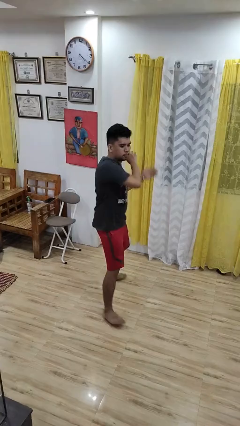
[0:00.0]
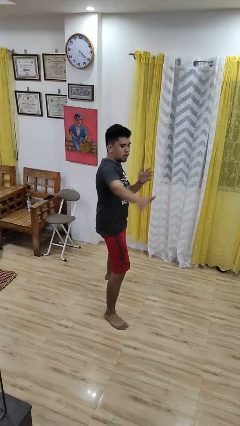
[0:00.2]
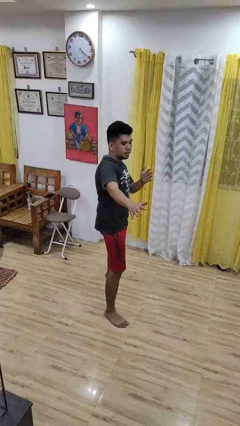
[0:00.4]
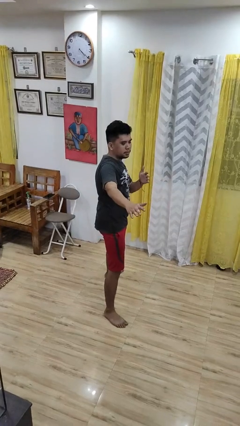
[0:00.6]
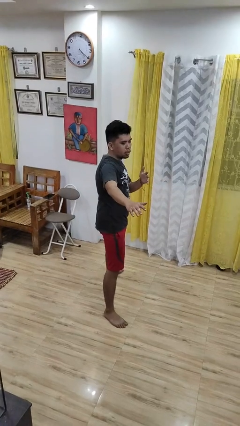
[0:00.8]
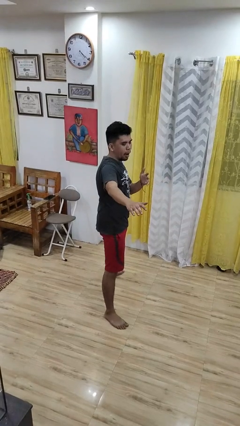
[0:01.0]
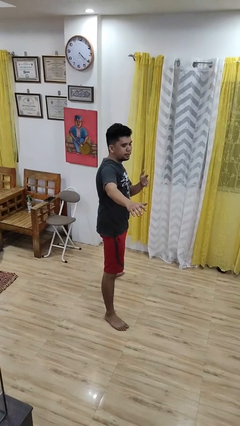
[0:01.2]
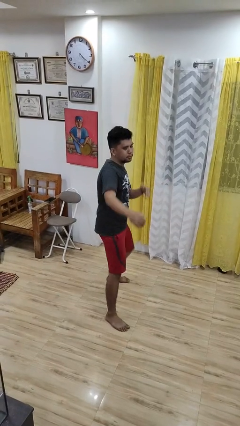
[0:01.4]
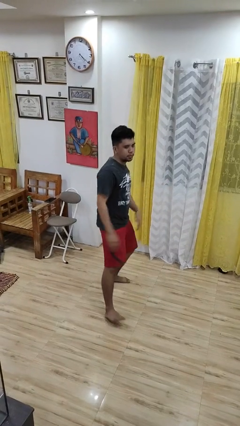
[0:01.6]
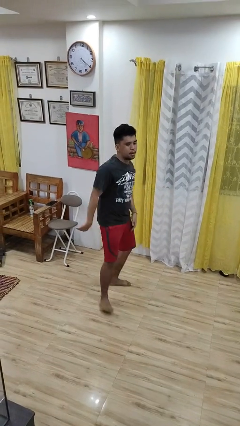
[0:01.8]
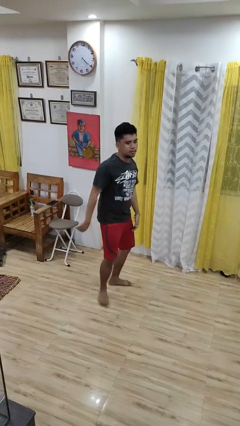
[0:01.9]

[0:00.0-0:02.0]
person karate chop

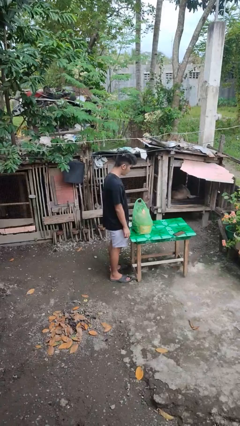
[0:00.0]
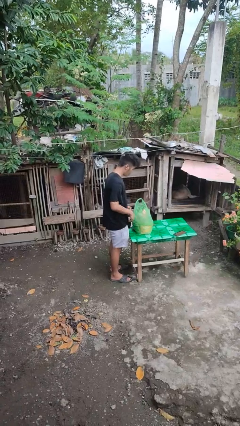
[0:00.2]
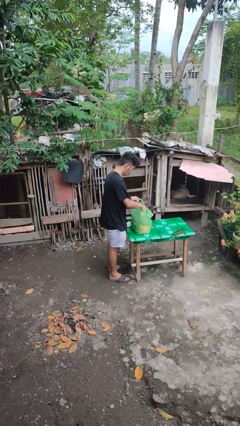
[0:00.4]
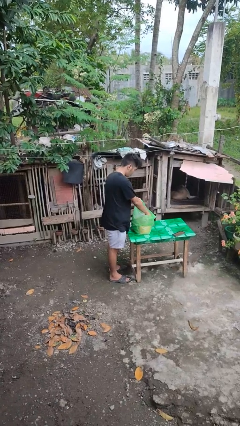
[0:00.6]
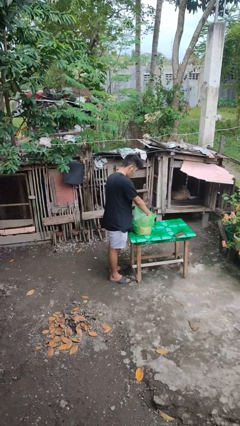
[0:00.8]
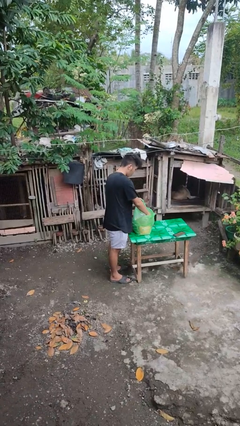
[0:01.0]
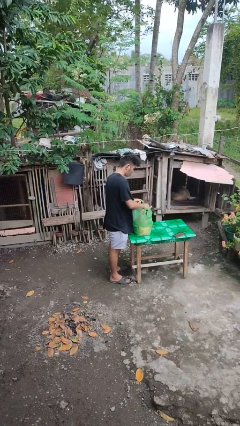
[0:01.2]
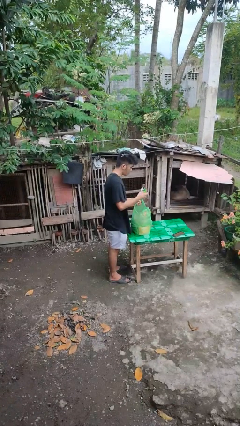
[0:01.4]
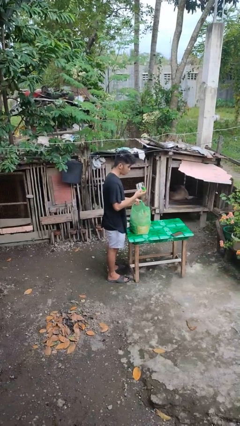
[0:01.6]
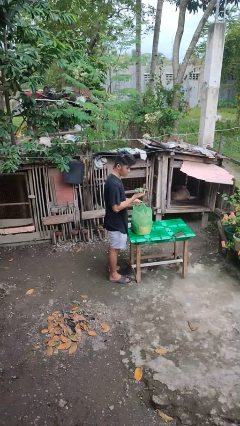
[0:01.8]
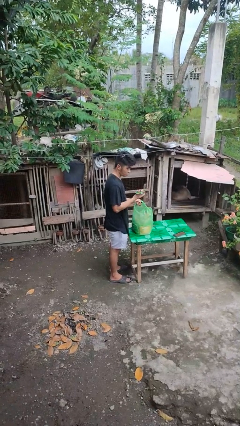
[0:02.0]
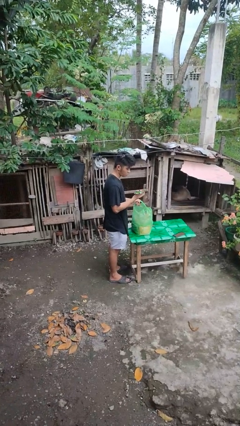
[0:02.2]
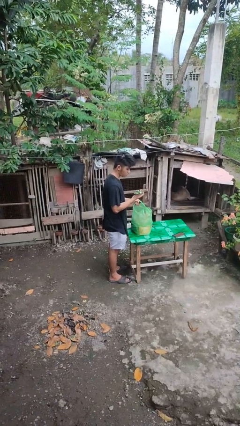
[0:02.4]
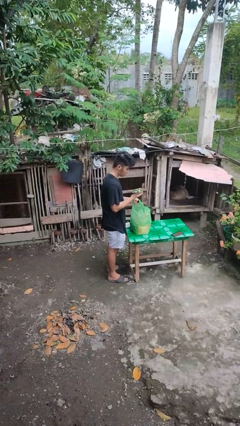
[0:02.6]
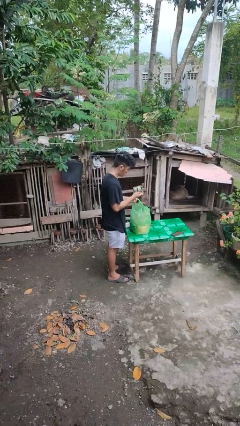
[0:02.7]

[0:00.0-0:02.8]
person takes object from bag

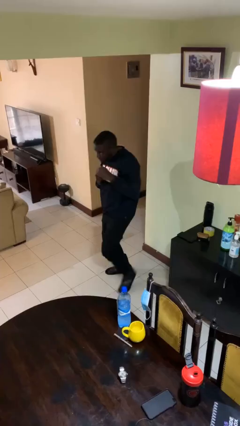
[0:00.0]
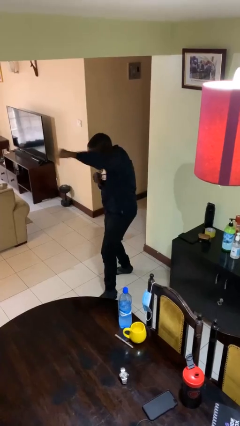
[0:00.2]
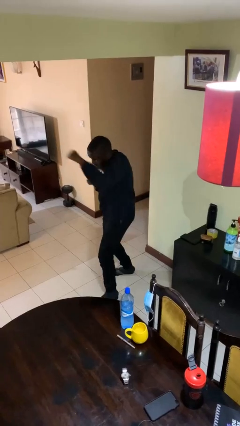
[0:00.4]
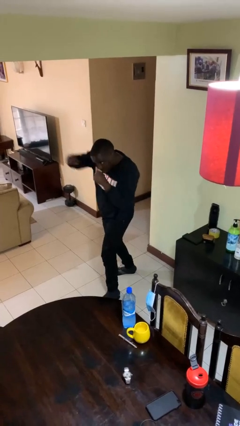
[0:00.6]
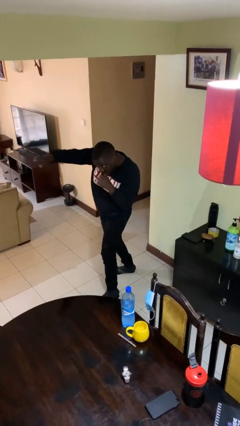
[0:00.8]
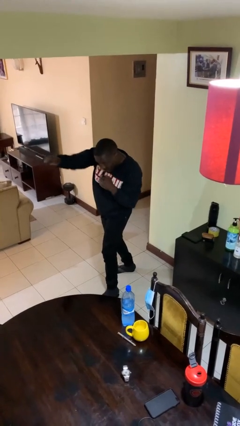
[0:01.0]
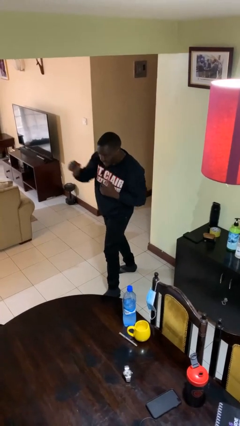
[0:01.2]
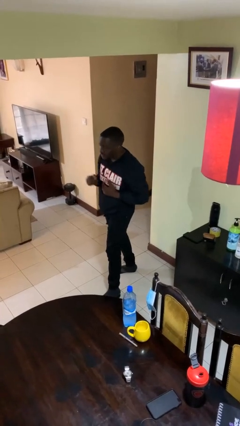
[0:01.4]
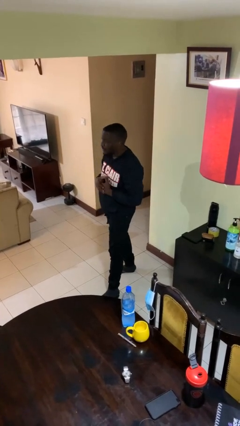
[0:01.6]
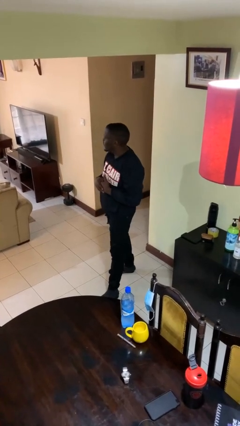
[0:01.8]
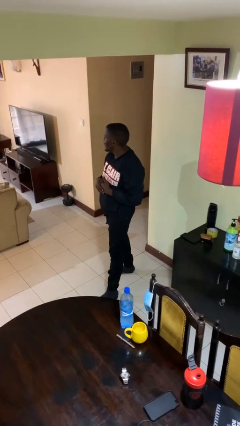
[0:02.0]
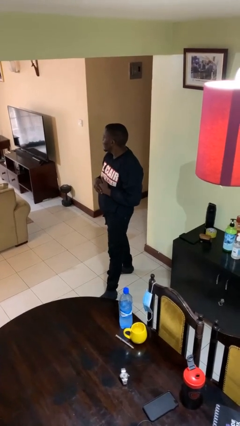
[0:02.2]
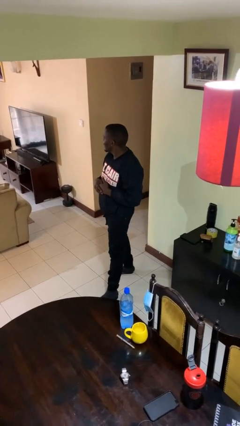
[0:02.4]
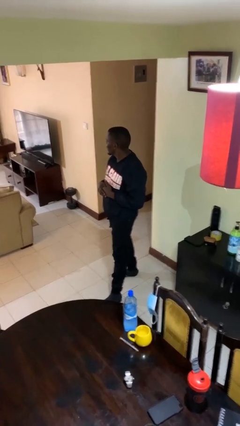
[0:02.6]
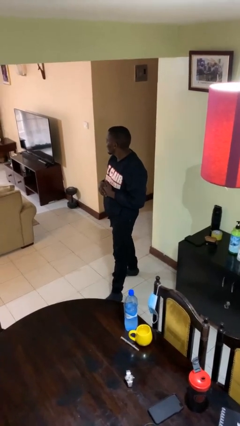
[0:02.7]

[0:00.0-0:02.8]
person punches

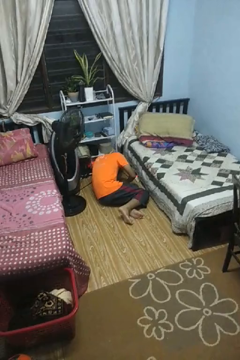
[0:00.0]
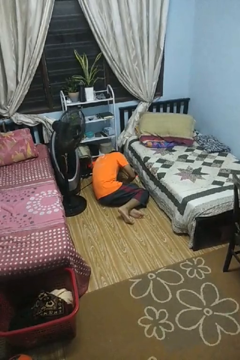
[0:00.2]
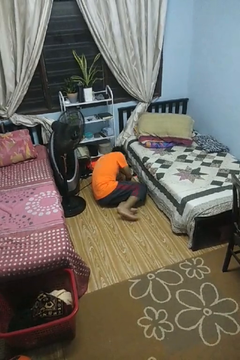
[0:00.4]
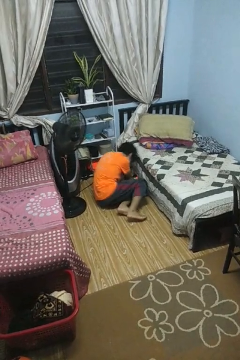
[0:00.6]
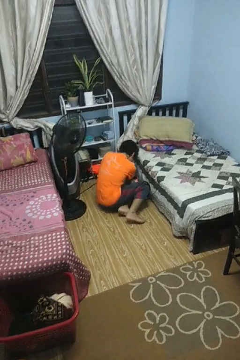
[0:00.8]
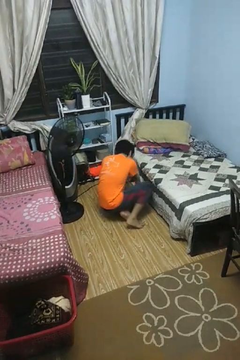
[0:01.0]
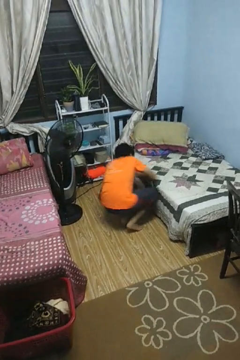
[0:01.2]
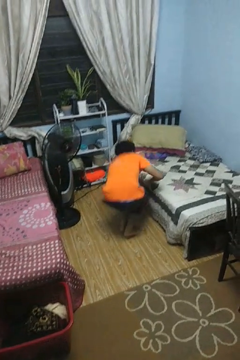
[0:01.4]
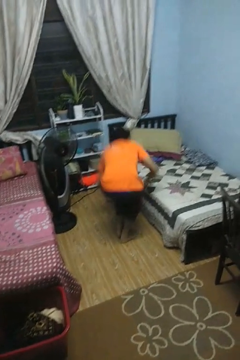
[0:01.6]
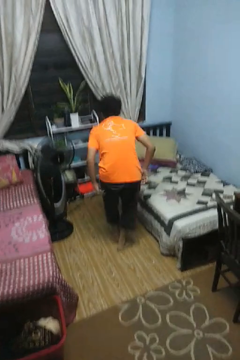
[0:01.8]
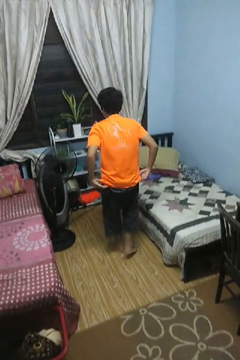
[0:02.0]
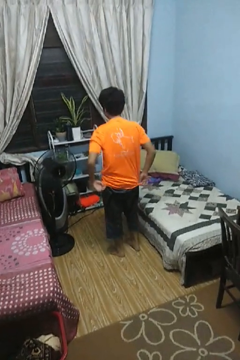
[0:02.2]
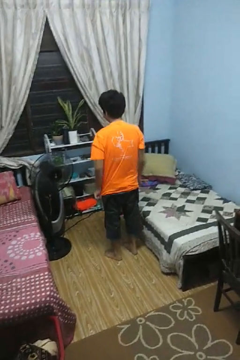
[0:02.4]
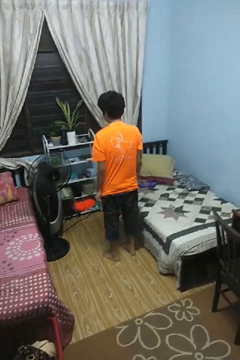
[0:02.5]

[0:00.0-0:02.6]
person stands up from floor

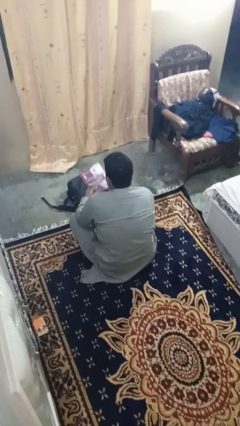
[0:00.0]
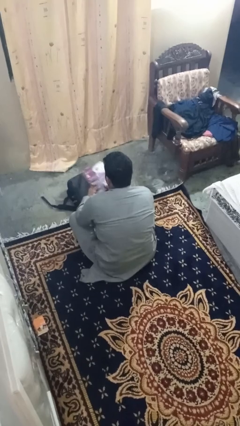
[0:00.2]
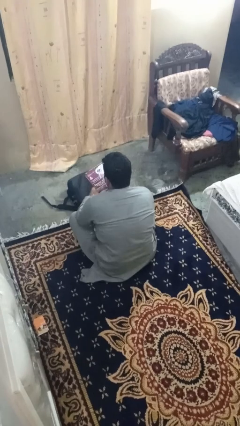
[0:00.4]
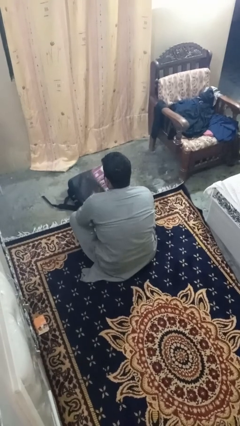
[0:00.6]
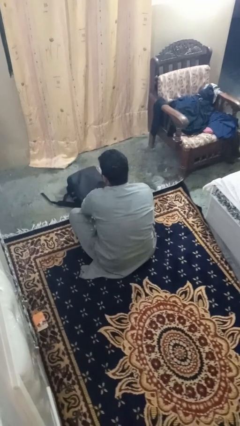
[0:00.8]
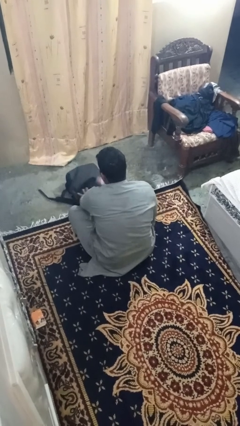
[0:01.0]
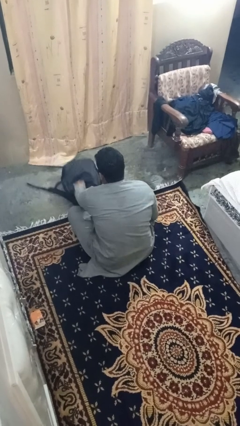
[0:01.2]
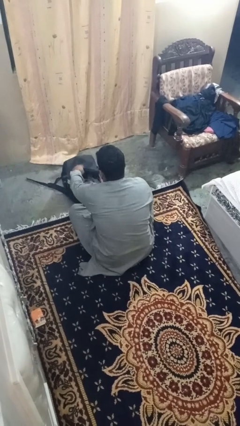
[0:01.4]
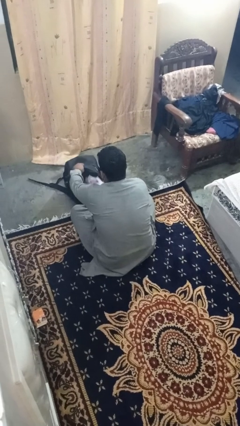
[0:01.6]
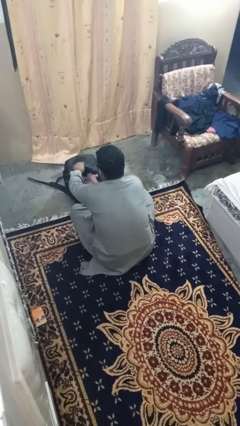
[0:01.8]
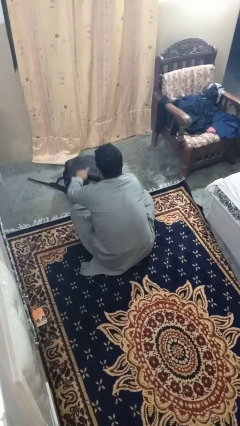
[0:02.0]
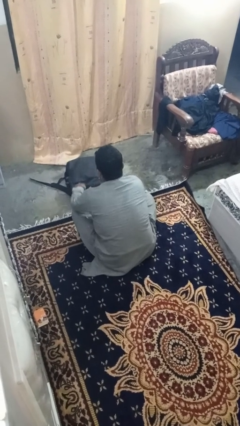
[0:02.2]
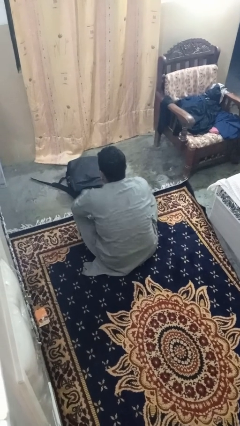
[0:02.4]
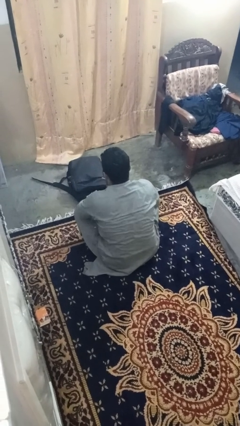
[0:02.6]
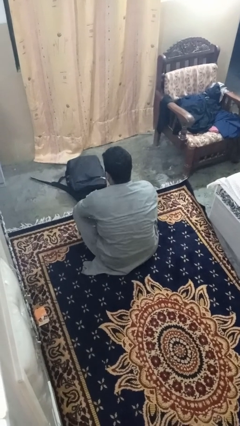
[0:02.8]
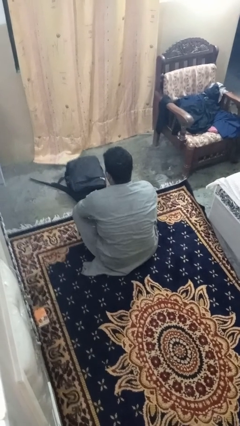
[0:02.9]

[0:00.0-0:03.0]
person puts object into bag

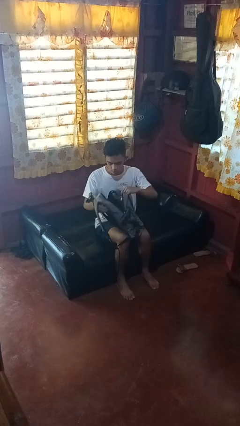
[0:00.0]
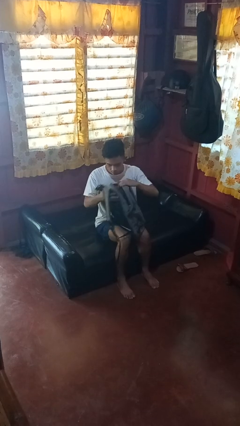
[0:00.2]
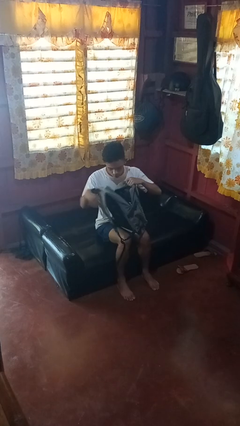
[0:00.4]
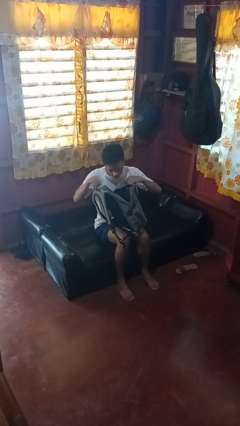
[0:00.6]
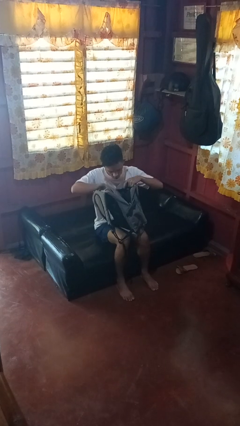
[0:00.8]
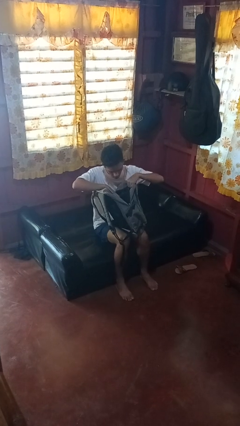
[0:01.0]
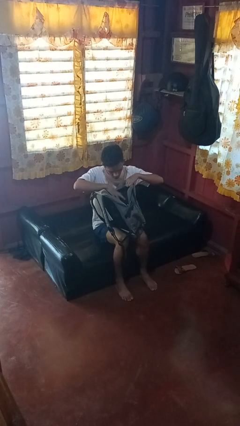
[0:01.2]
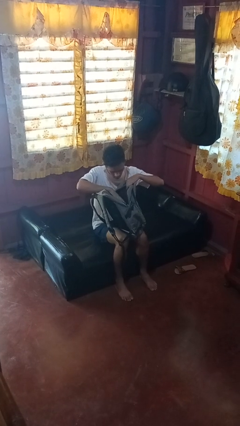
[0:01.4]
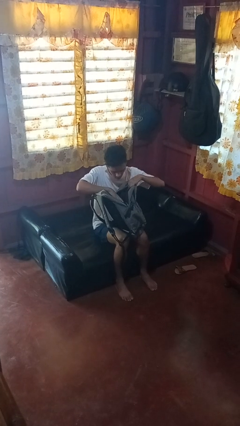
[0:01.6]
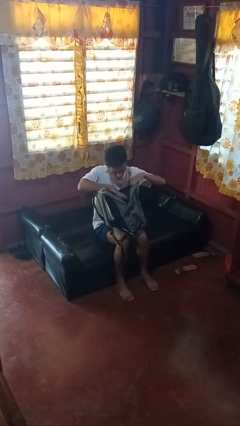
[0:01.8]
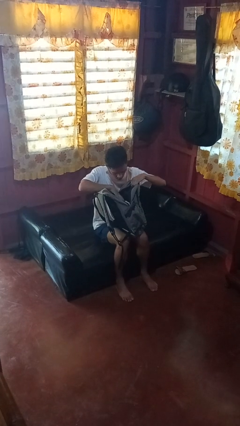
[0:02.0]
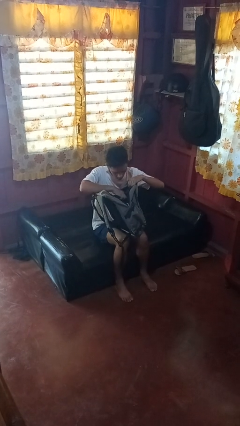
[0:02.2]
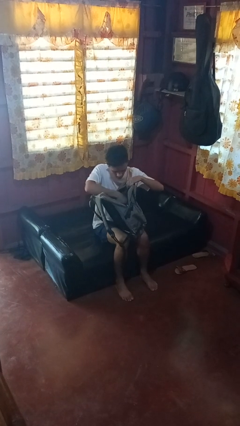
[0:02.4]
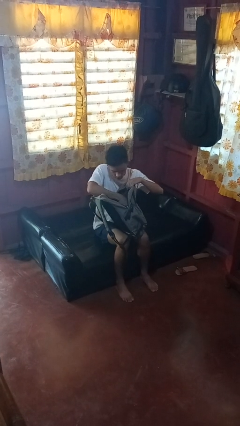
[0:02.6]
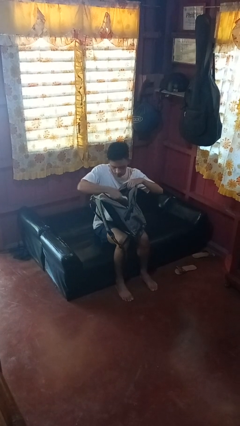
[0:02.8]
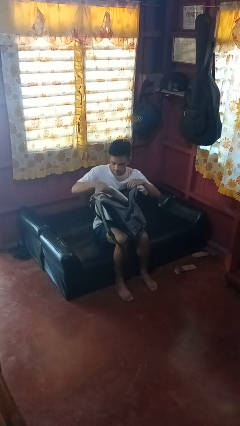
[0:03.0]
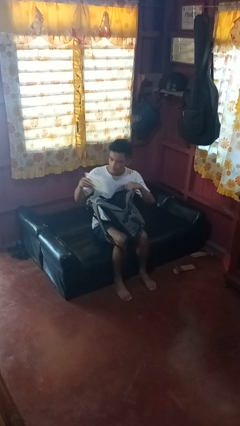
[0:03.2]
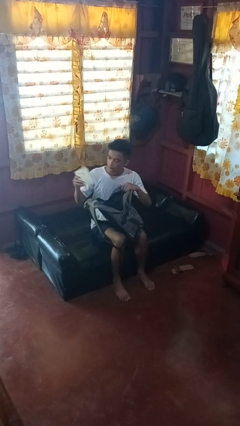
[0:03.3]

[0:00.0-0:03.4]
person searches in backpack

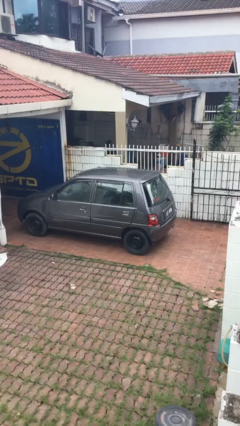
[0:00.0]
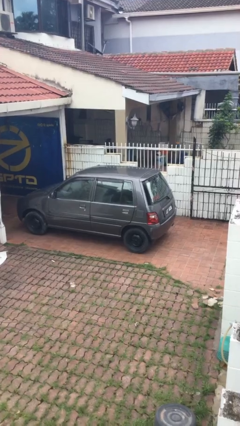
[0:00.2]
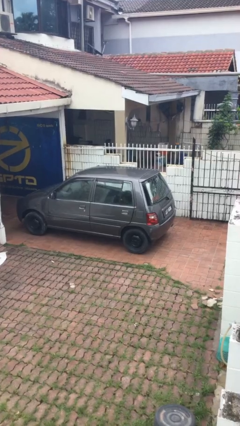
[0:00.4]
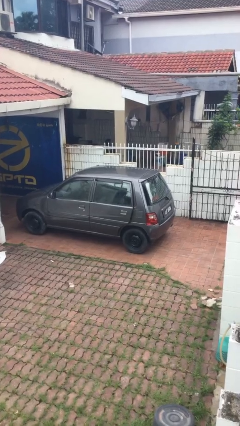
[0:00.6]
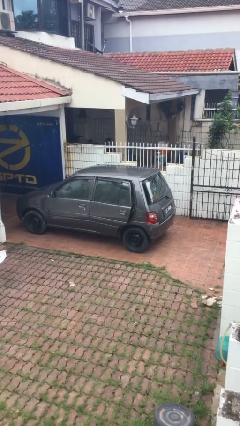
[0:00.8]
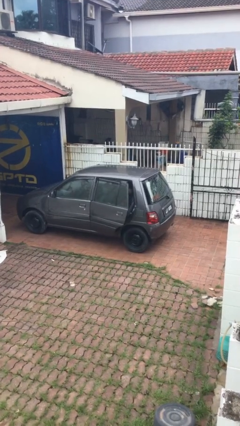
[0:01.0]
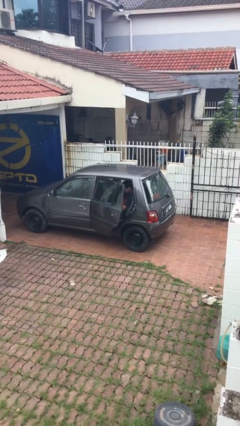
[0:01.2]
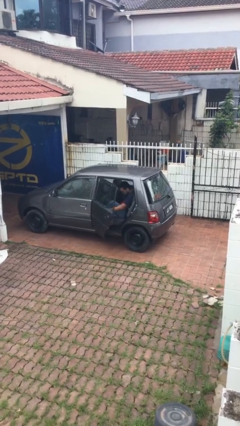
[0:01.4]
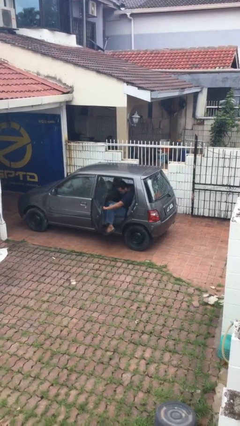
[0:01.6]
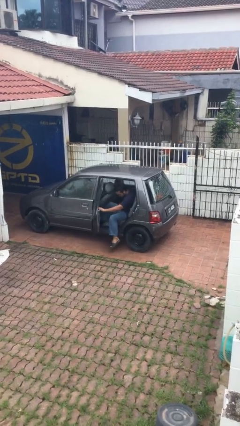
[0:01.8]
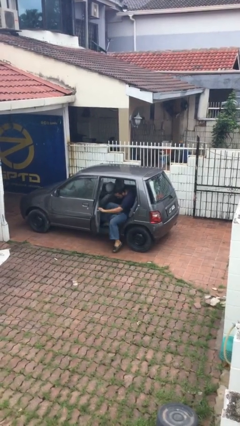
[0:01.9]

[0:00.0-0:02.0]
person opens car door
